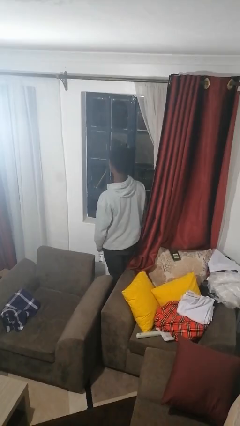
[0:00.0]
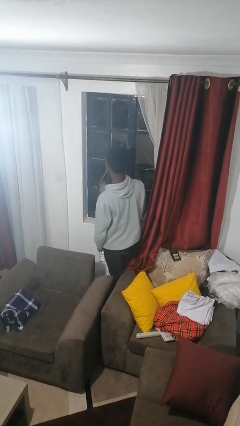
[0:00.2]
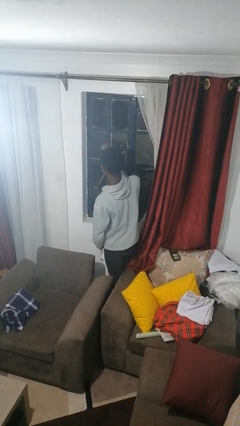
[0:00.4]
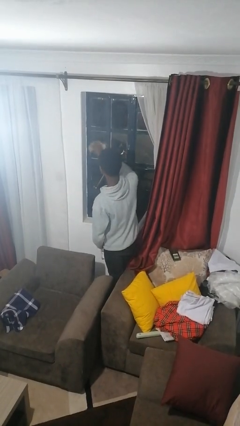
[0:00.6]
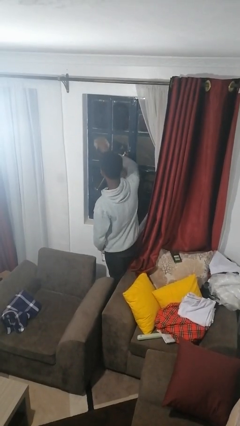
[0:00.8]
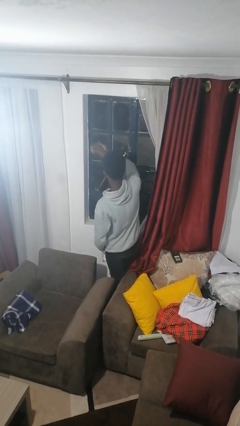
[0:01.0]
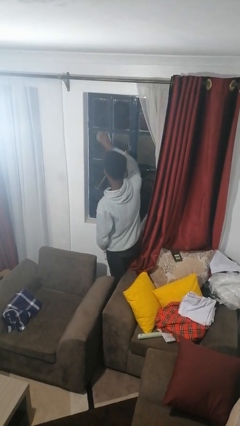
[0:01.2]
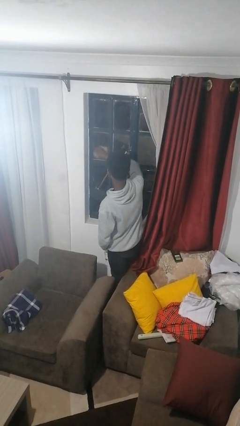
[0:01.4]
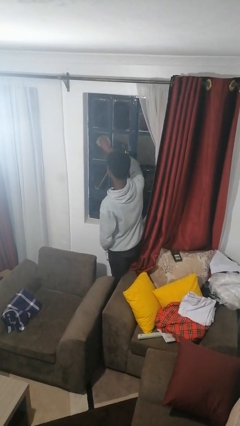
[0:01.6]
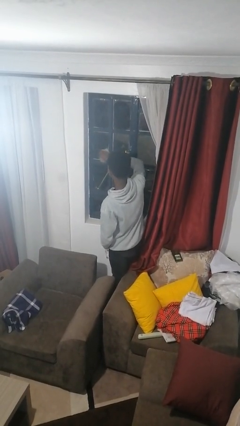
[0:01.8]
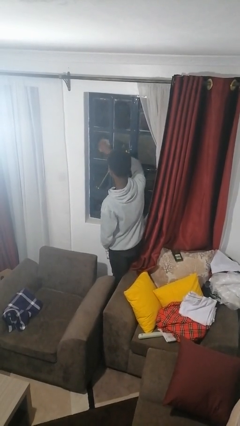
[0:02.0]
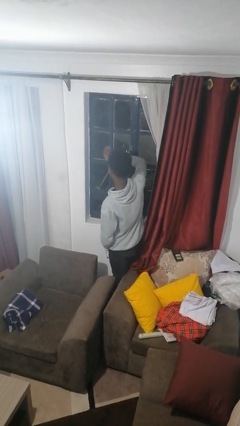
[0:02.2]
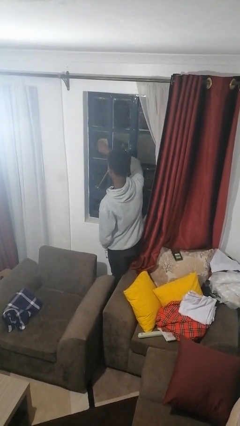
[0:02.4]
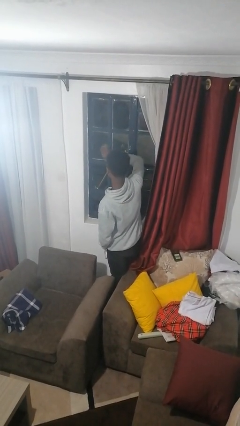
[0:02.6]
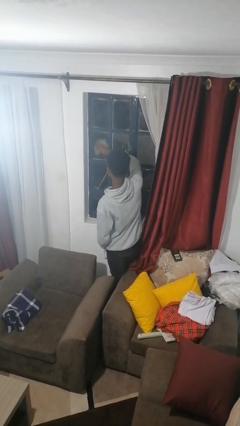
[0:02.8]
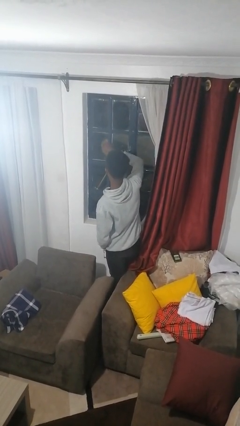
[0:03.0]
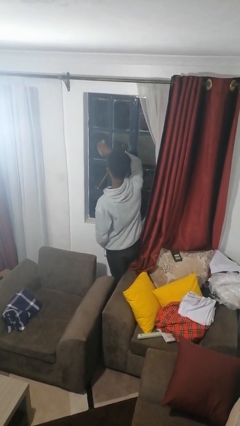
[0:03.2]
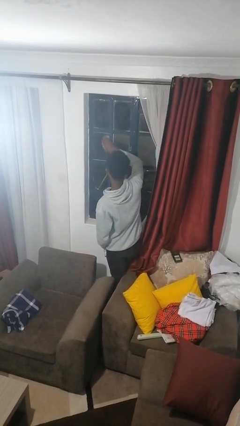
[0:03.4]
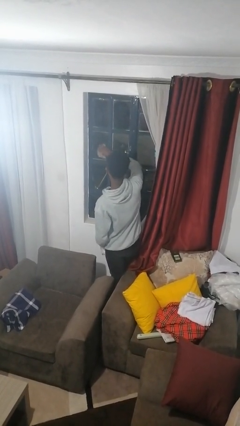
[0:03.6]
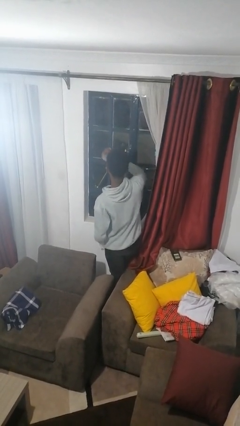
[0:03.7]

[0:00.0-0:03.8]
person washes window

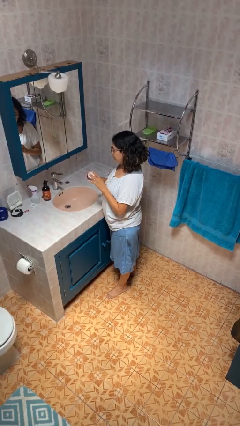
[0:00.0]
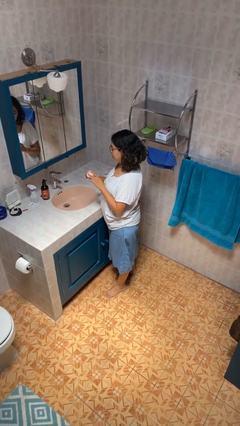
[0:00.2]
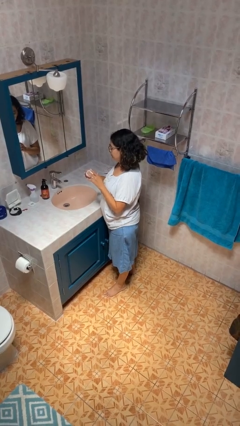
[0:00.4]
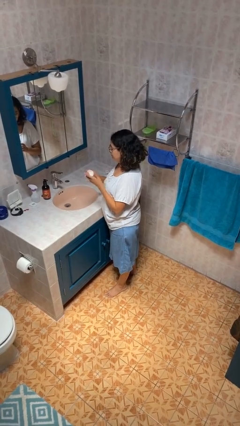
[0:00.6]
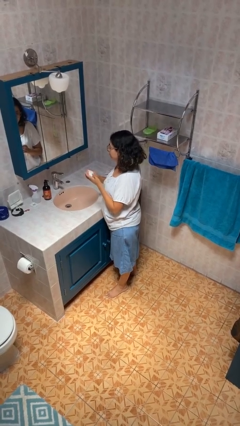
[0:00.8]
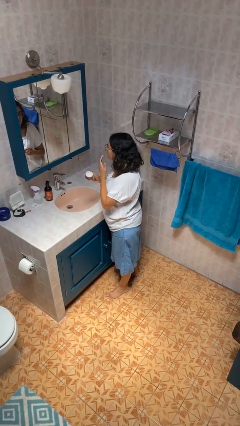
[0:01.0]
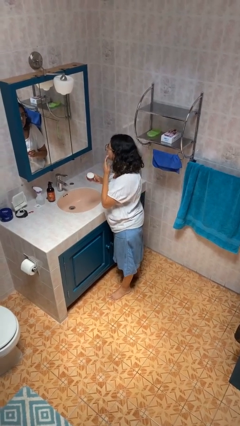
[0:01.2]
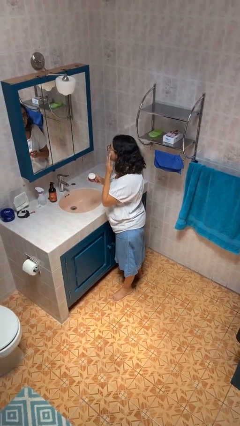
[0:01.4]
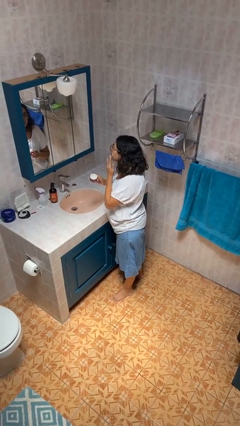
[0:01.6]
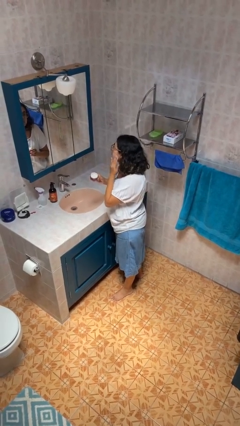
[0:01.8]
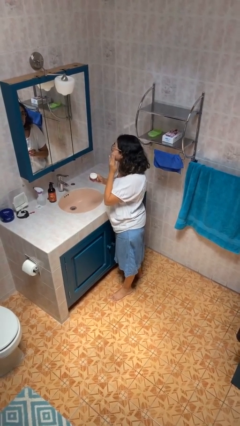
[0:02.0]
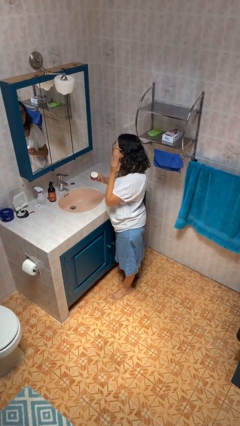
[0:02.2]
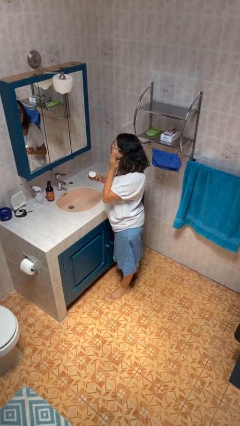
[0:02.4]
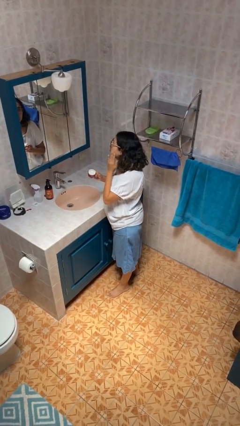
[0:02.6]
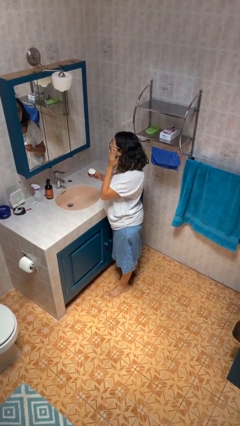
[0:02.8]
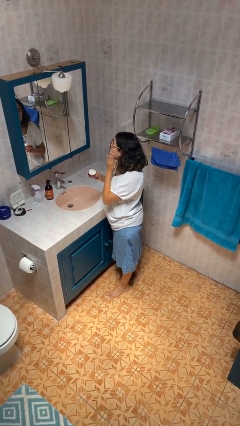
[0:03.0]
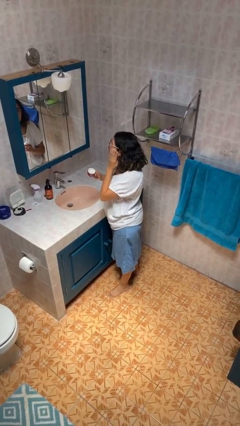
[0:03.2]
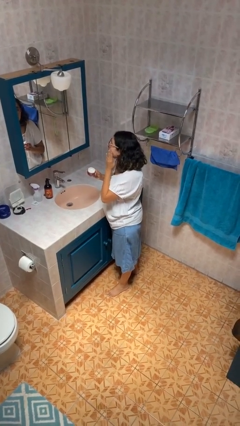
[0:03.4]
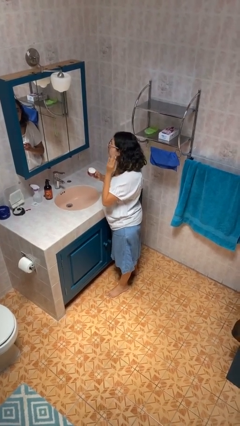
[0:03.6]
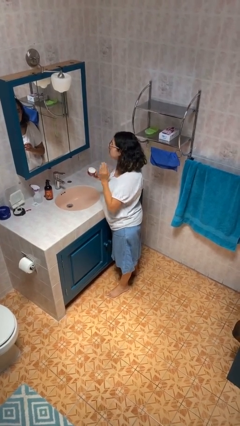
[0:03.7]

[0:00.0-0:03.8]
person applies facial moisturizer

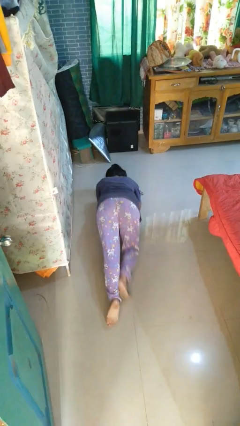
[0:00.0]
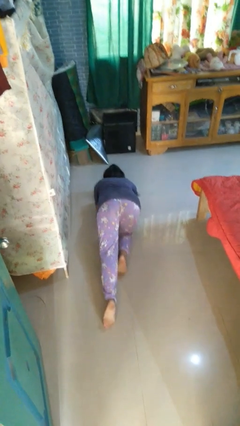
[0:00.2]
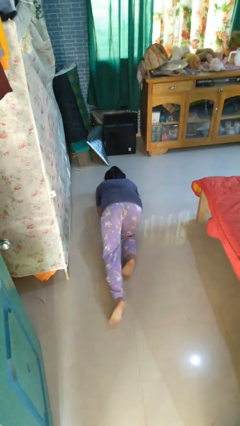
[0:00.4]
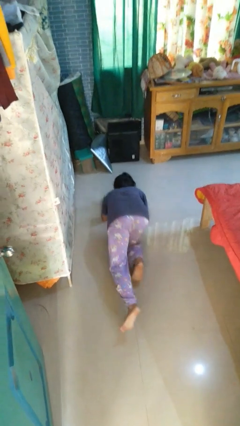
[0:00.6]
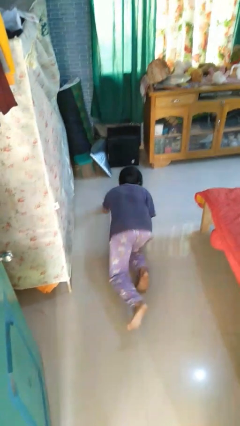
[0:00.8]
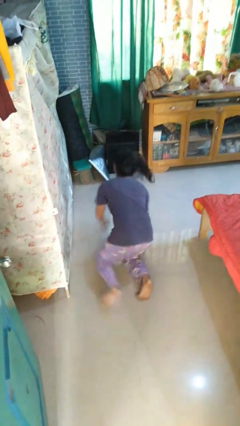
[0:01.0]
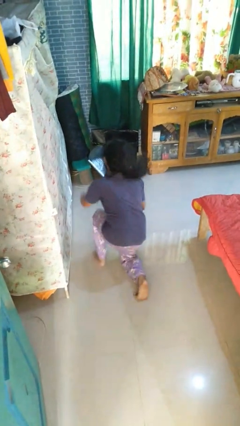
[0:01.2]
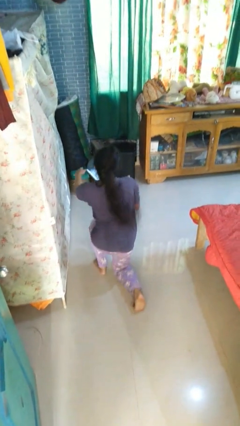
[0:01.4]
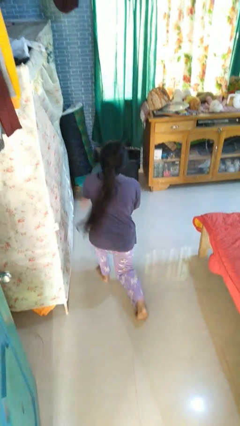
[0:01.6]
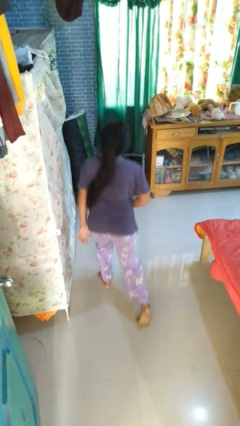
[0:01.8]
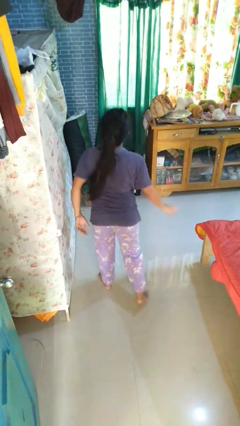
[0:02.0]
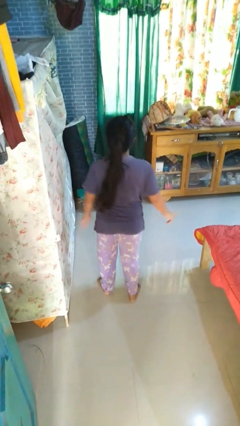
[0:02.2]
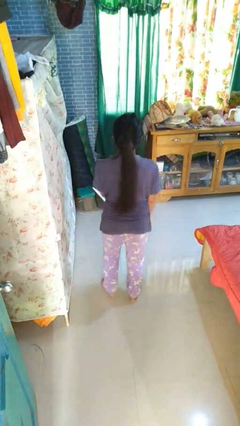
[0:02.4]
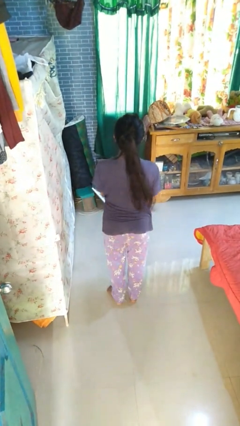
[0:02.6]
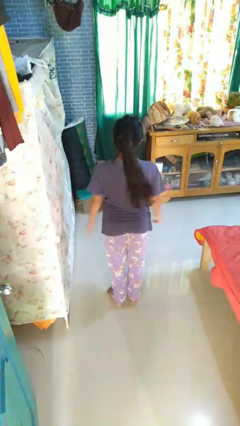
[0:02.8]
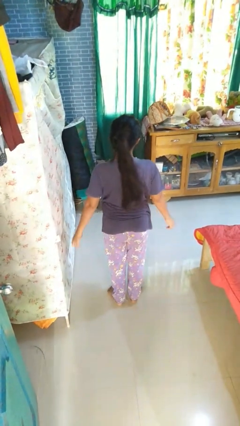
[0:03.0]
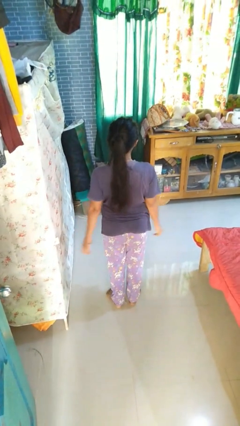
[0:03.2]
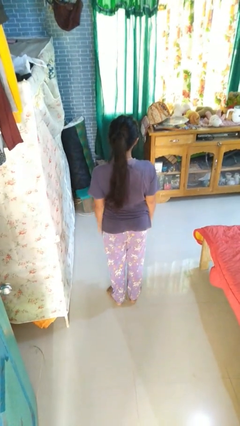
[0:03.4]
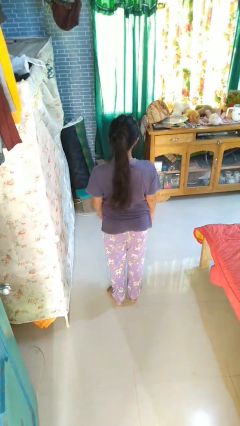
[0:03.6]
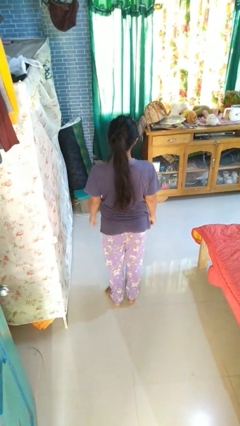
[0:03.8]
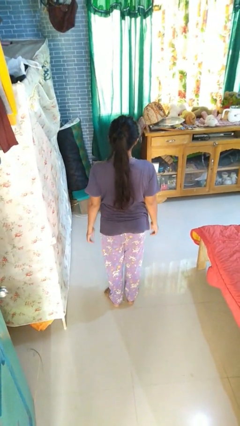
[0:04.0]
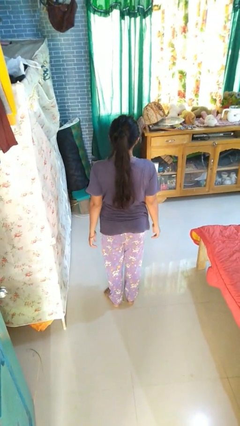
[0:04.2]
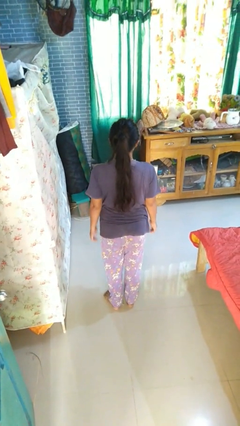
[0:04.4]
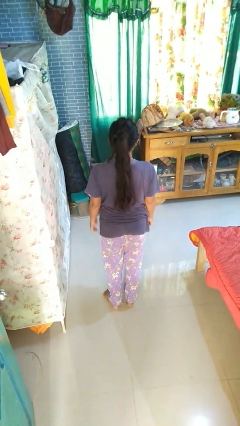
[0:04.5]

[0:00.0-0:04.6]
person stands up from floor

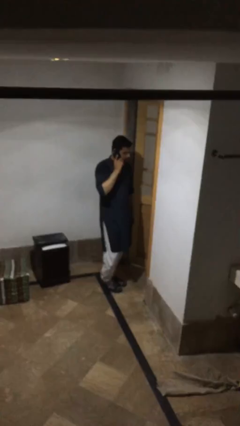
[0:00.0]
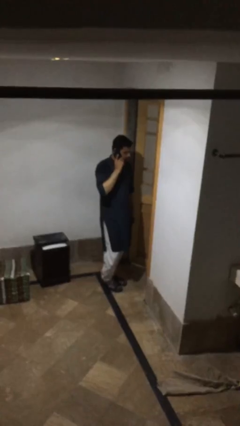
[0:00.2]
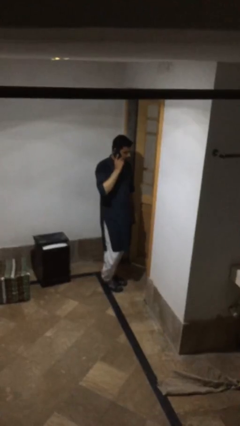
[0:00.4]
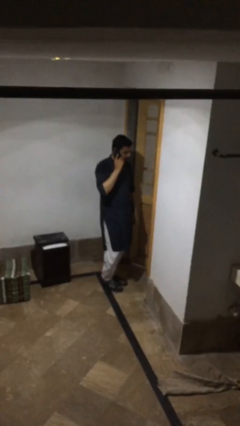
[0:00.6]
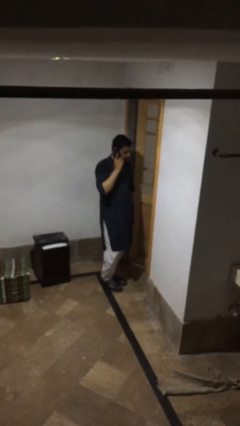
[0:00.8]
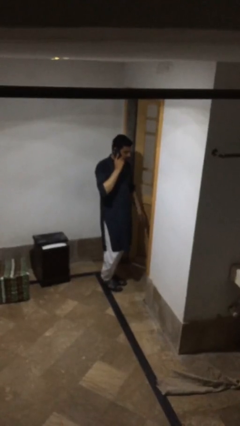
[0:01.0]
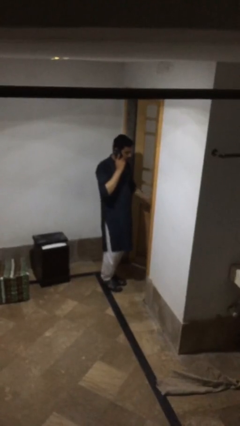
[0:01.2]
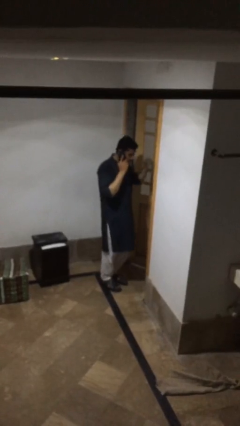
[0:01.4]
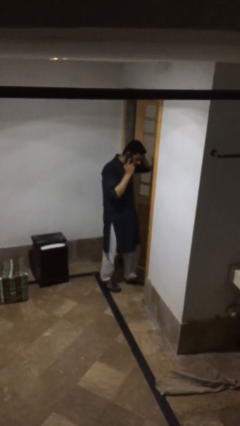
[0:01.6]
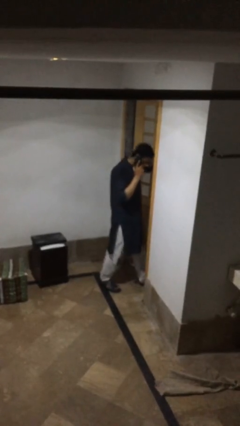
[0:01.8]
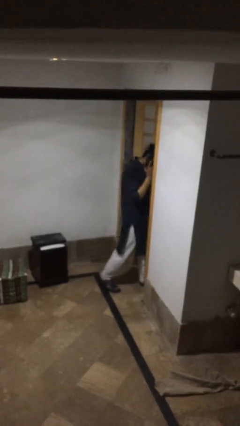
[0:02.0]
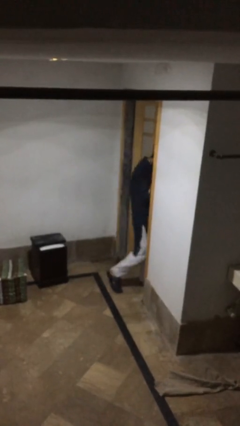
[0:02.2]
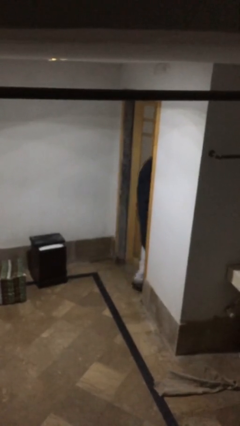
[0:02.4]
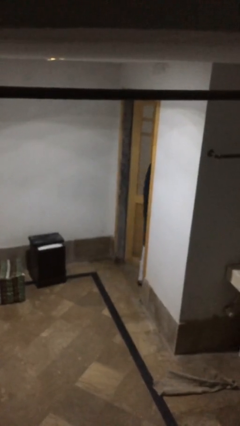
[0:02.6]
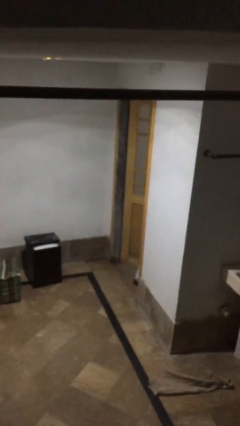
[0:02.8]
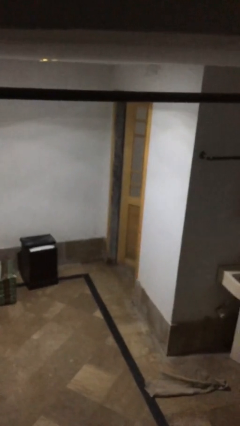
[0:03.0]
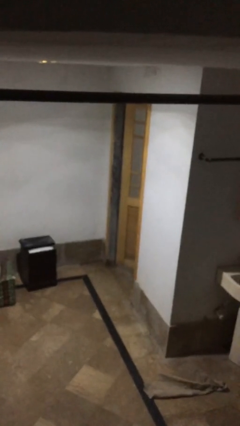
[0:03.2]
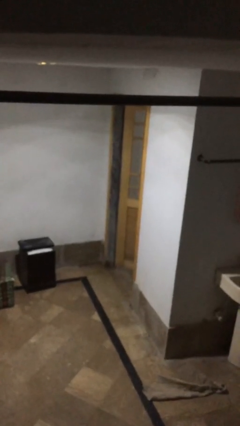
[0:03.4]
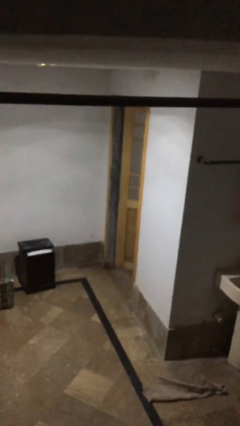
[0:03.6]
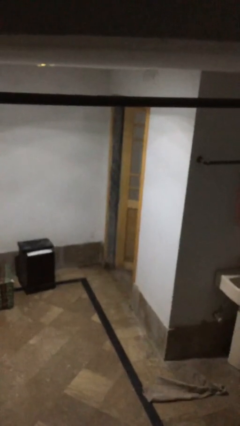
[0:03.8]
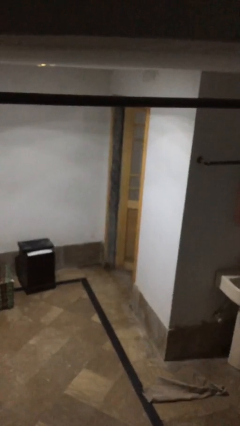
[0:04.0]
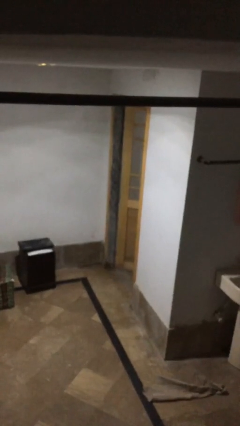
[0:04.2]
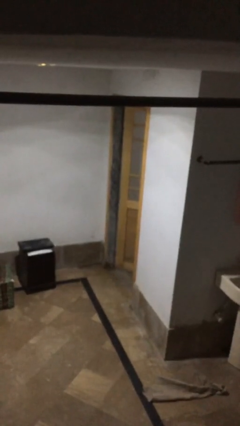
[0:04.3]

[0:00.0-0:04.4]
person exits scene through structure

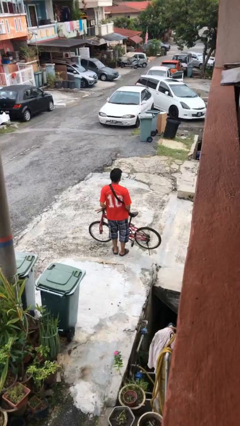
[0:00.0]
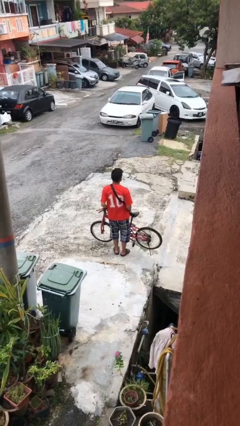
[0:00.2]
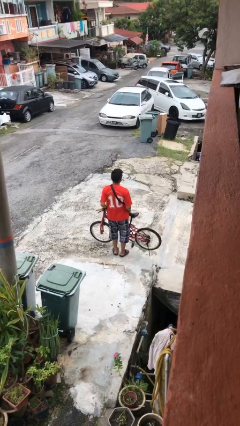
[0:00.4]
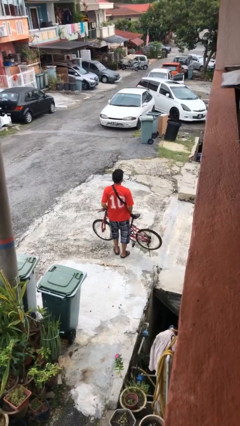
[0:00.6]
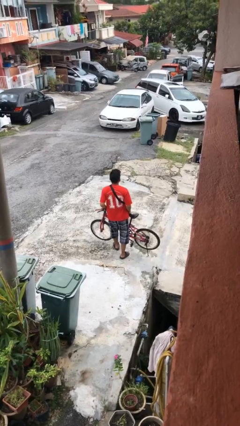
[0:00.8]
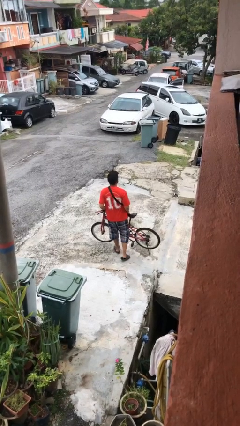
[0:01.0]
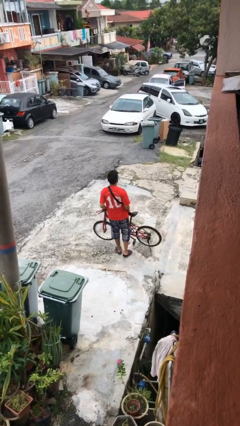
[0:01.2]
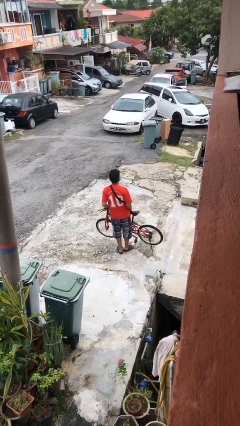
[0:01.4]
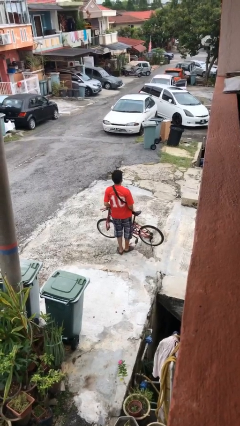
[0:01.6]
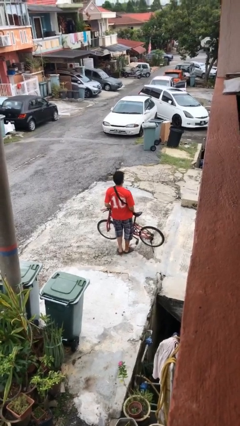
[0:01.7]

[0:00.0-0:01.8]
person carries bicycle
